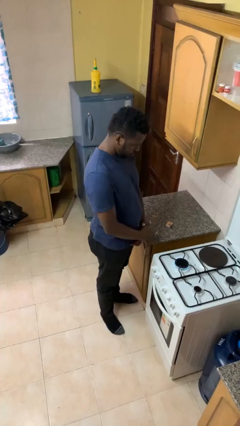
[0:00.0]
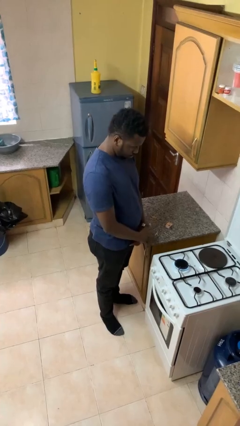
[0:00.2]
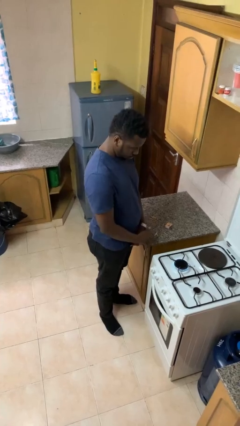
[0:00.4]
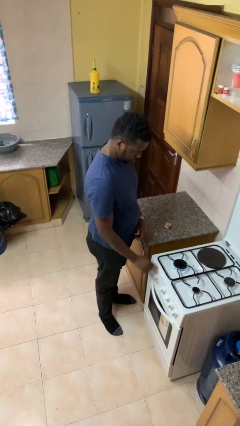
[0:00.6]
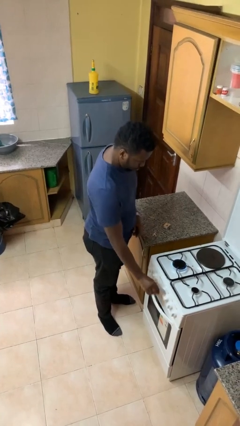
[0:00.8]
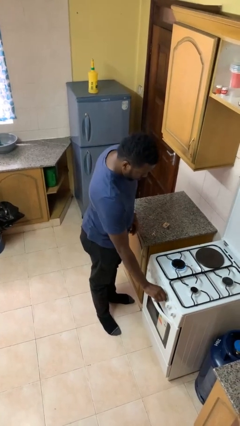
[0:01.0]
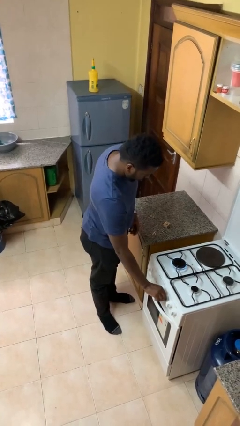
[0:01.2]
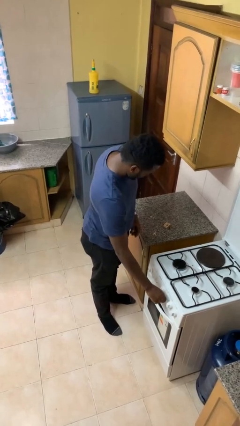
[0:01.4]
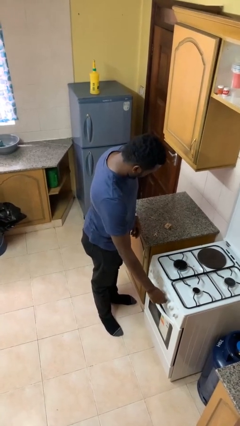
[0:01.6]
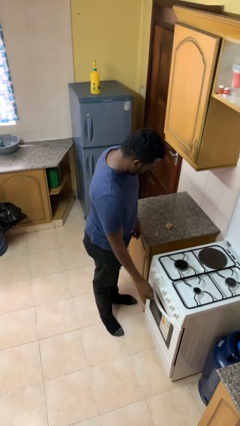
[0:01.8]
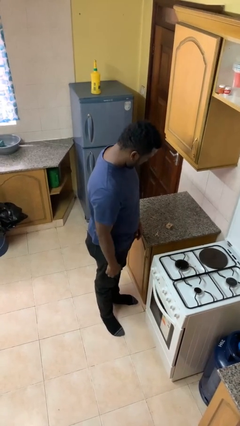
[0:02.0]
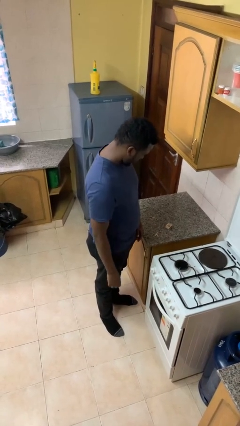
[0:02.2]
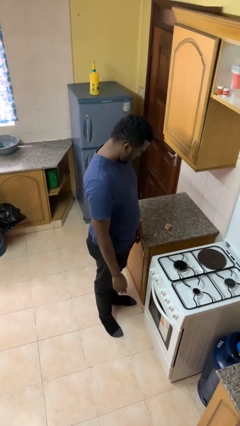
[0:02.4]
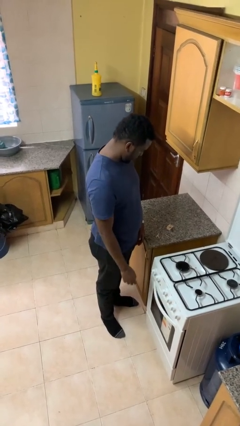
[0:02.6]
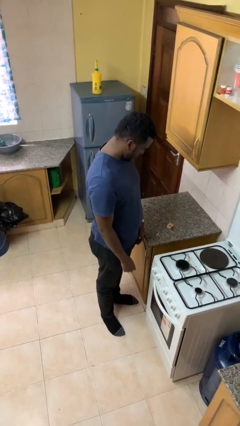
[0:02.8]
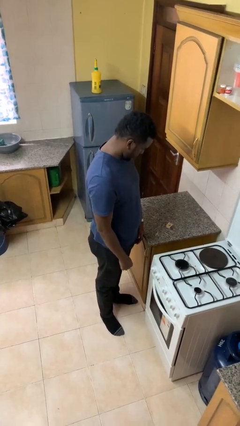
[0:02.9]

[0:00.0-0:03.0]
person turns off stovetop

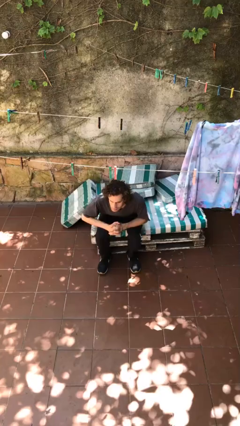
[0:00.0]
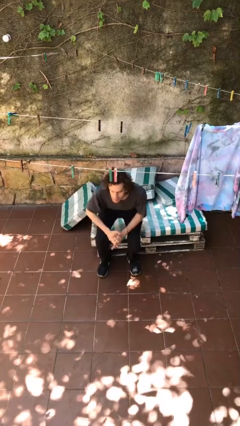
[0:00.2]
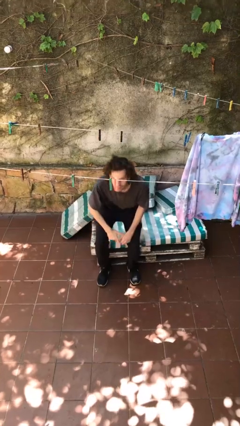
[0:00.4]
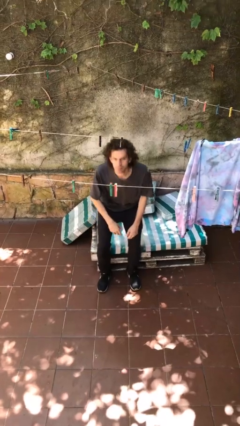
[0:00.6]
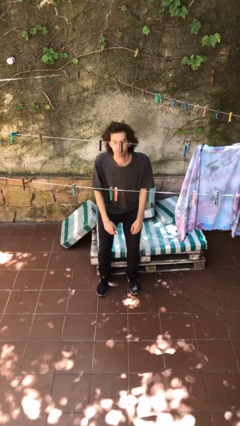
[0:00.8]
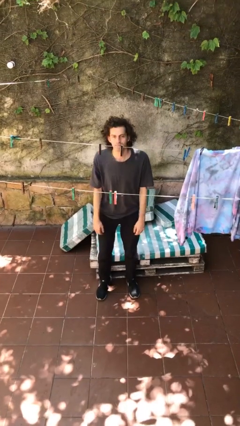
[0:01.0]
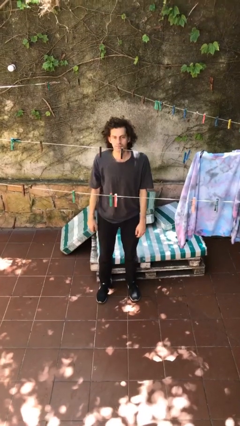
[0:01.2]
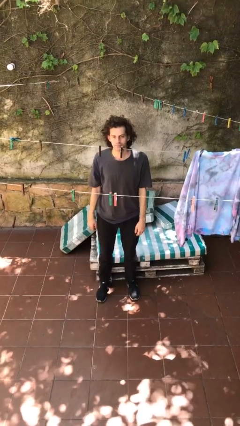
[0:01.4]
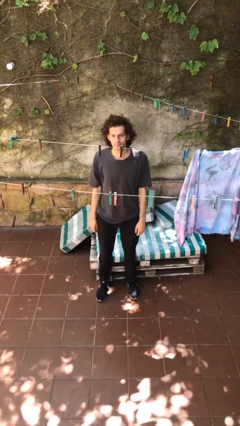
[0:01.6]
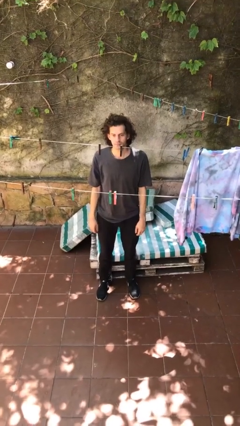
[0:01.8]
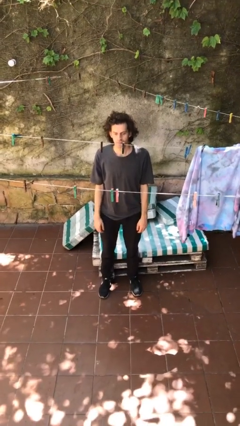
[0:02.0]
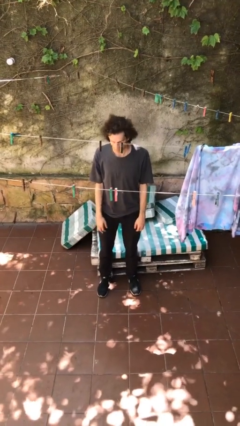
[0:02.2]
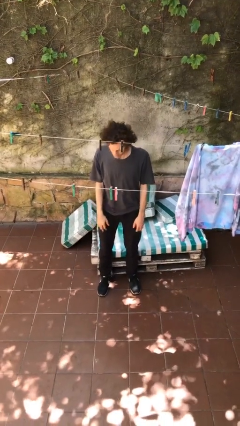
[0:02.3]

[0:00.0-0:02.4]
person stands up

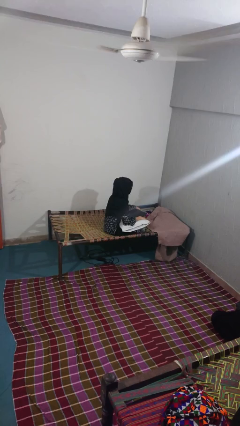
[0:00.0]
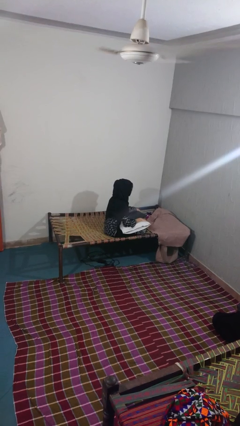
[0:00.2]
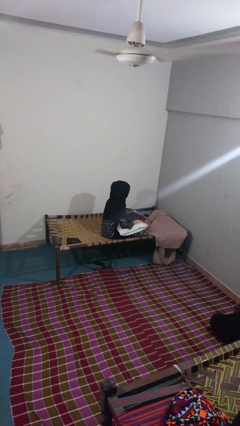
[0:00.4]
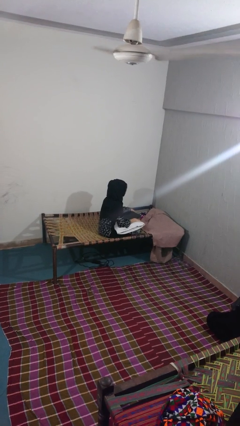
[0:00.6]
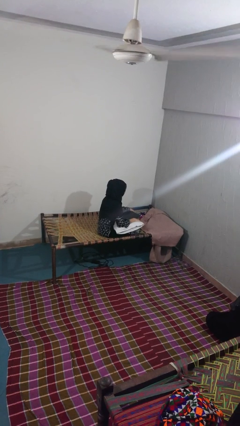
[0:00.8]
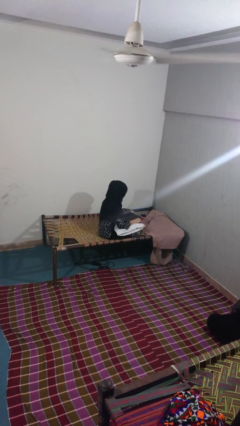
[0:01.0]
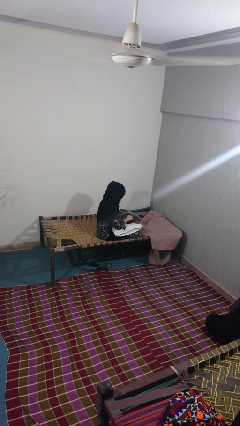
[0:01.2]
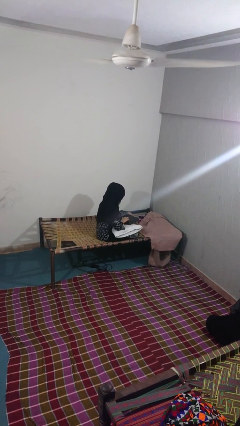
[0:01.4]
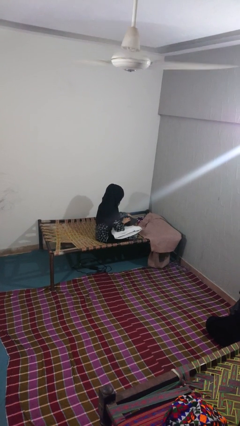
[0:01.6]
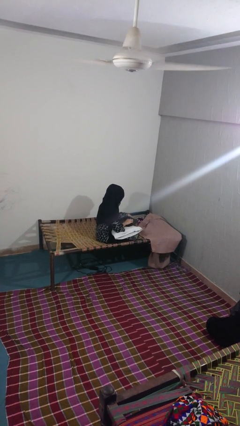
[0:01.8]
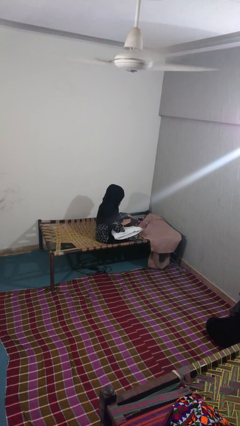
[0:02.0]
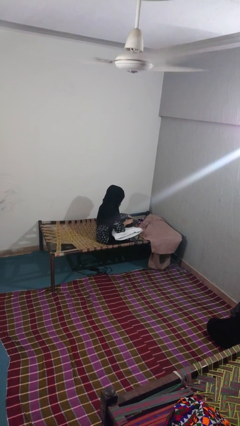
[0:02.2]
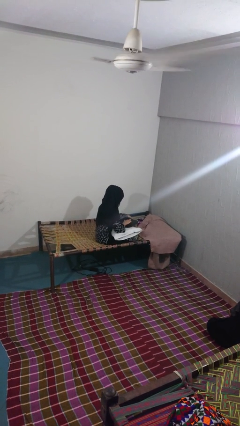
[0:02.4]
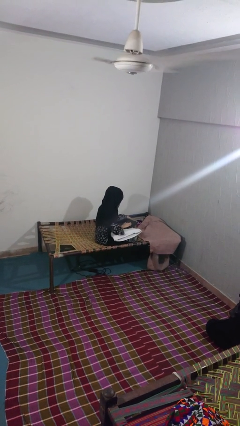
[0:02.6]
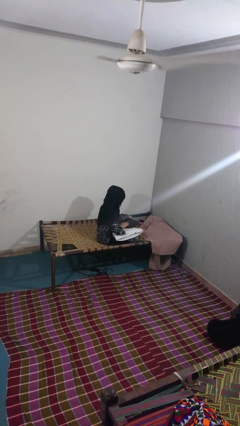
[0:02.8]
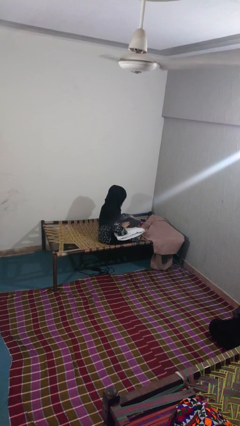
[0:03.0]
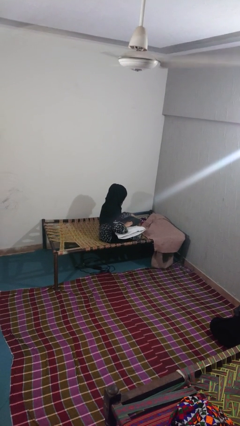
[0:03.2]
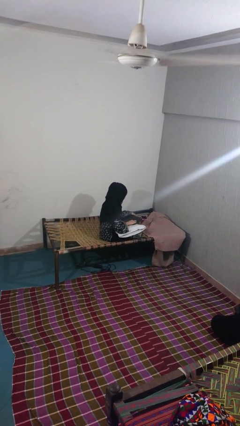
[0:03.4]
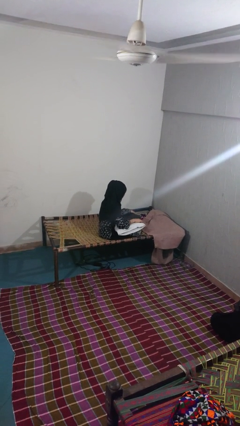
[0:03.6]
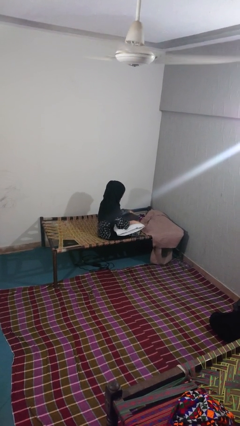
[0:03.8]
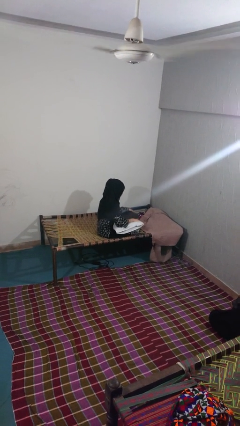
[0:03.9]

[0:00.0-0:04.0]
person interacts with tablet

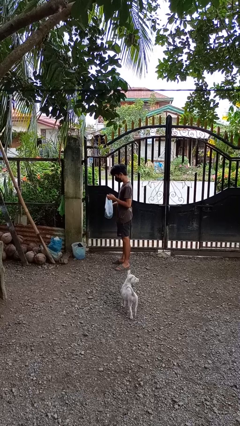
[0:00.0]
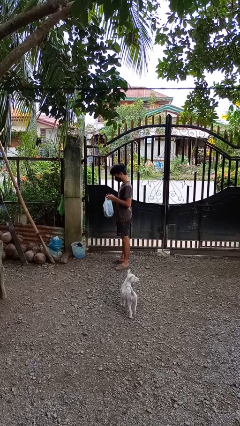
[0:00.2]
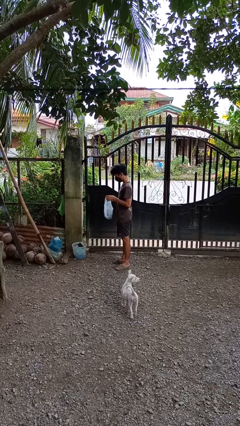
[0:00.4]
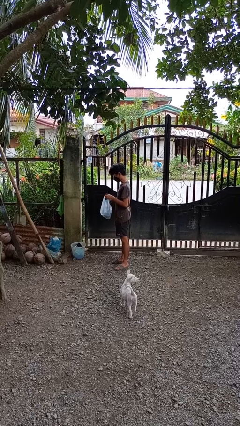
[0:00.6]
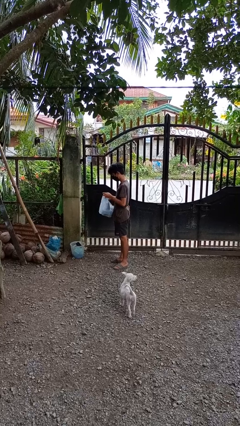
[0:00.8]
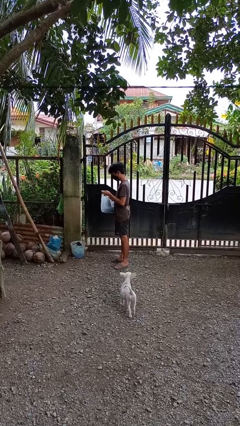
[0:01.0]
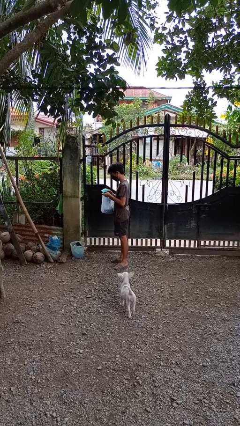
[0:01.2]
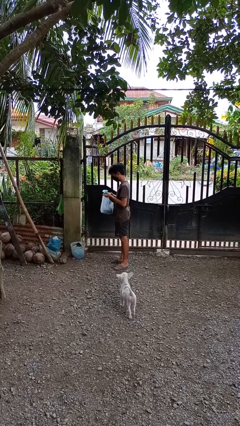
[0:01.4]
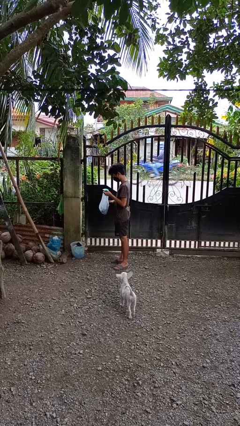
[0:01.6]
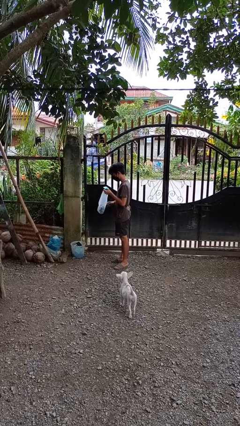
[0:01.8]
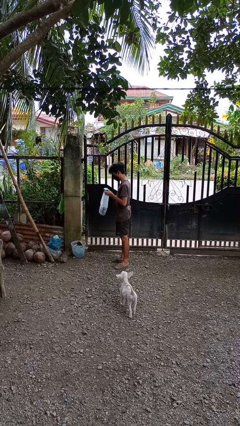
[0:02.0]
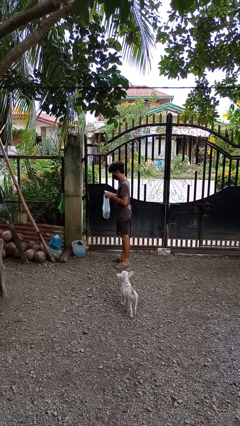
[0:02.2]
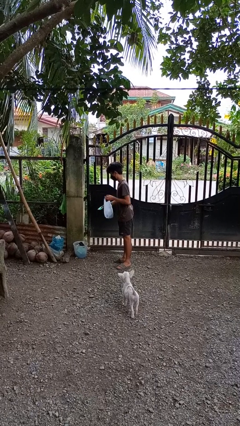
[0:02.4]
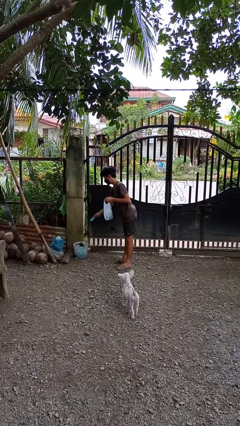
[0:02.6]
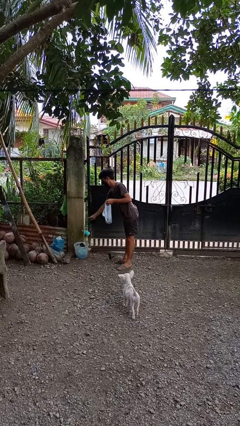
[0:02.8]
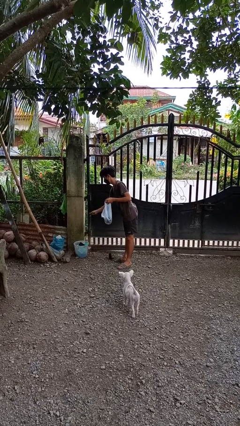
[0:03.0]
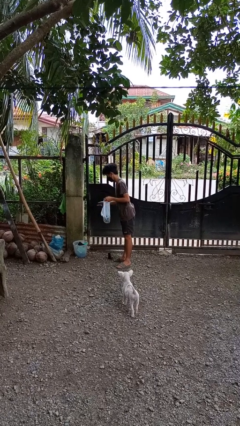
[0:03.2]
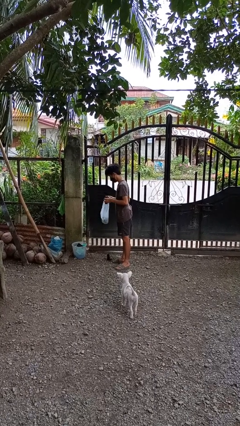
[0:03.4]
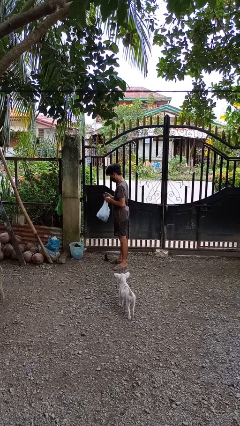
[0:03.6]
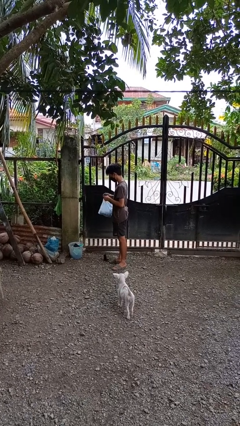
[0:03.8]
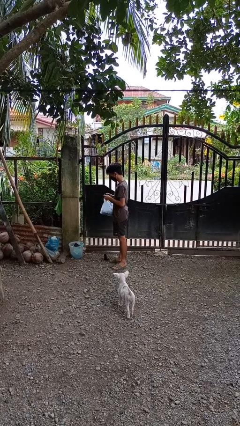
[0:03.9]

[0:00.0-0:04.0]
person discards trash

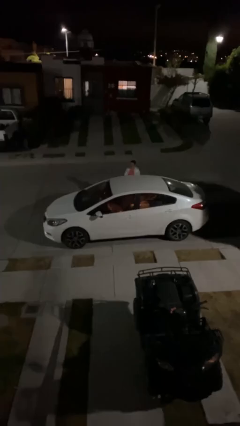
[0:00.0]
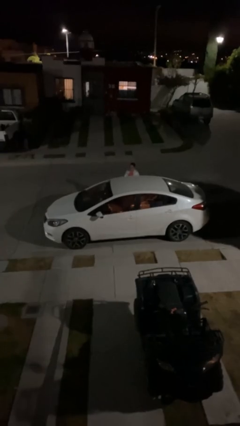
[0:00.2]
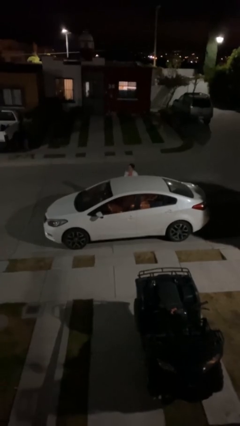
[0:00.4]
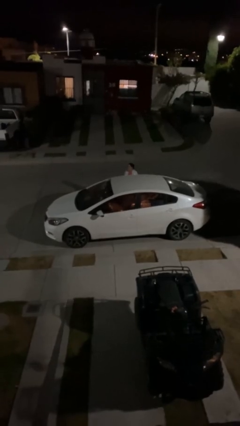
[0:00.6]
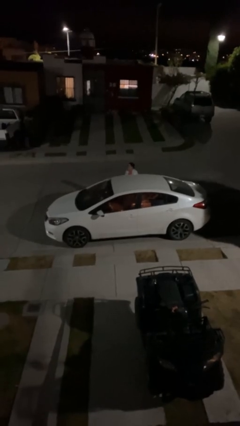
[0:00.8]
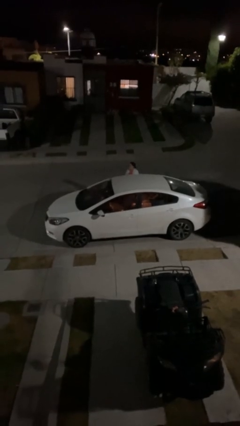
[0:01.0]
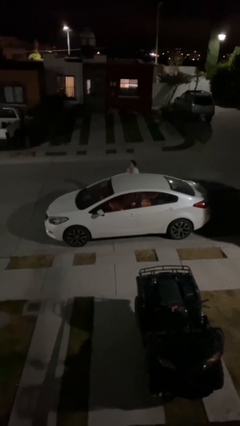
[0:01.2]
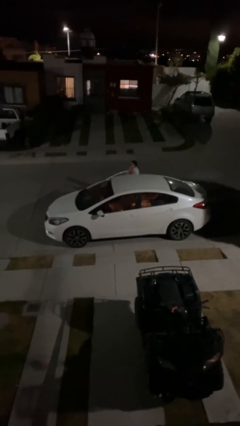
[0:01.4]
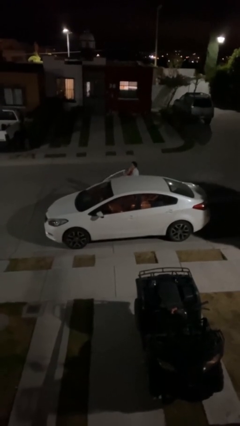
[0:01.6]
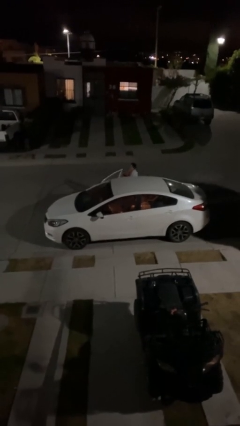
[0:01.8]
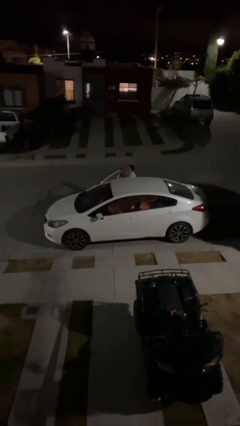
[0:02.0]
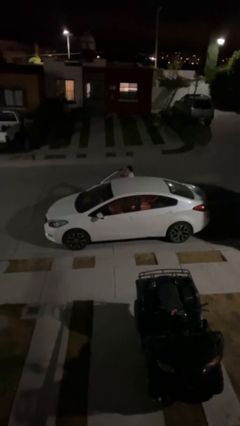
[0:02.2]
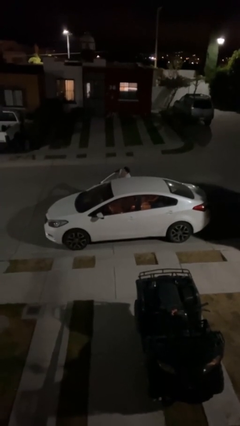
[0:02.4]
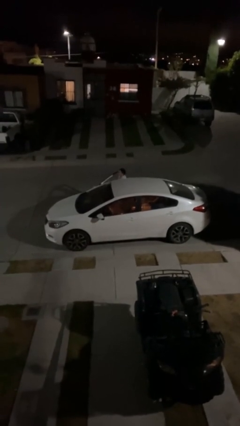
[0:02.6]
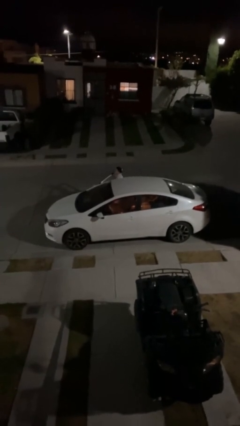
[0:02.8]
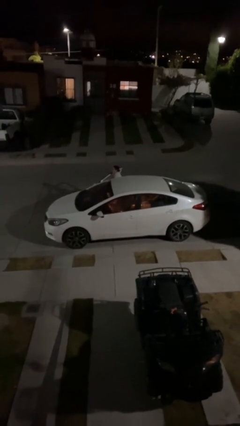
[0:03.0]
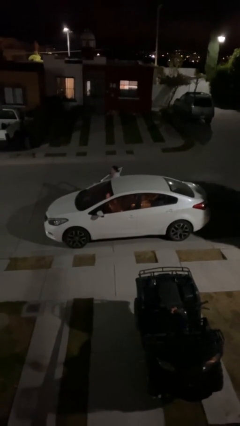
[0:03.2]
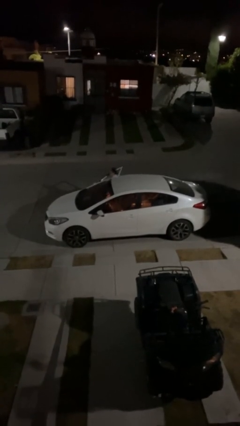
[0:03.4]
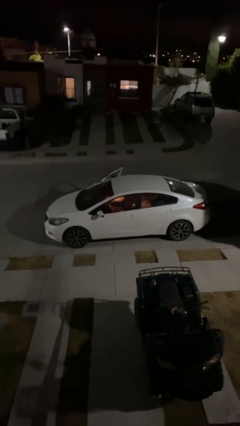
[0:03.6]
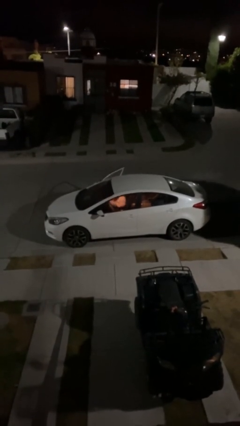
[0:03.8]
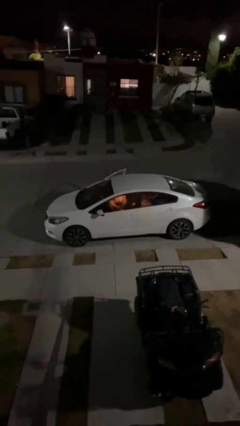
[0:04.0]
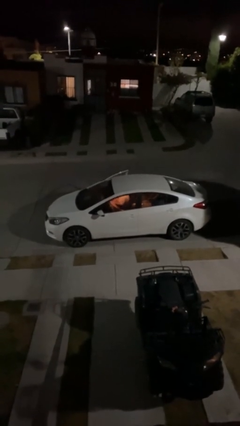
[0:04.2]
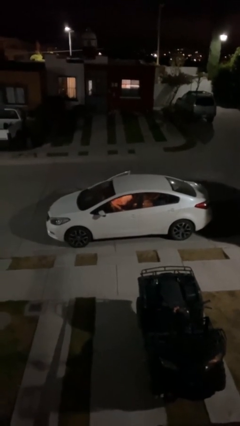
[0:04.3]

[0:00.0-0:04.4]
car picks up person
